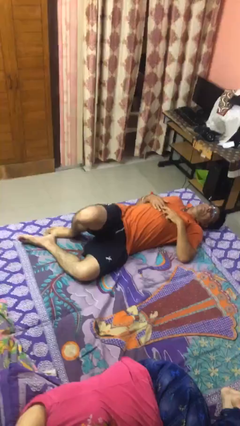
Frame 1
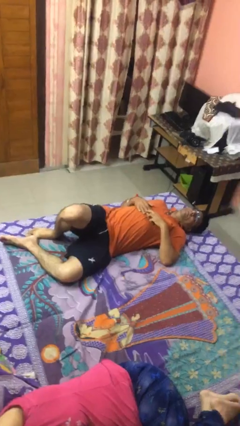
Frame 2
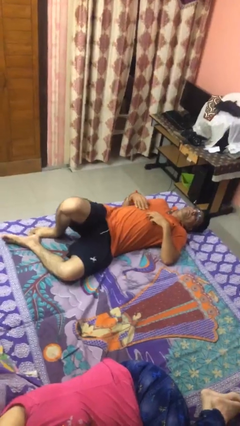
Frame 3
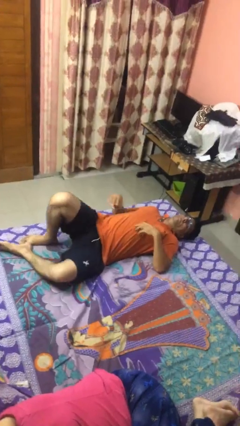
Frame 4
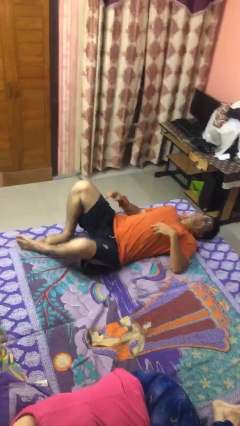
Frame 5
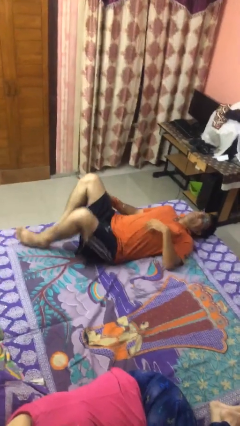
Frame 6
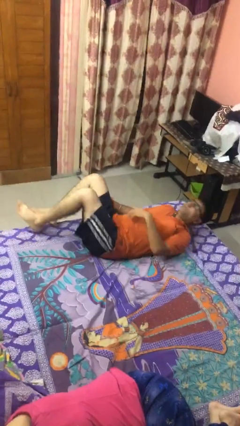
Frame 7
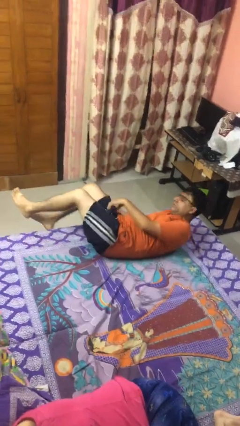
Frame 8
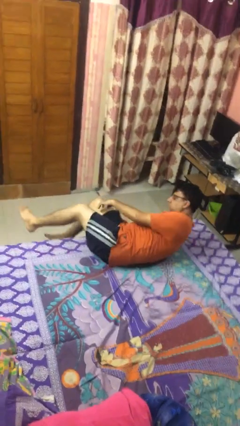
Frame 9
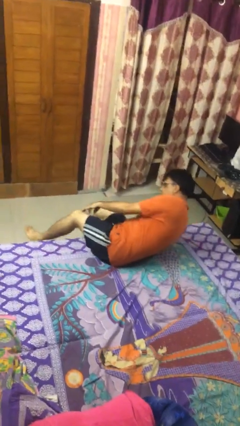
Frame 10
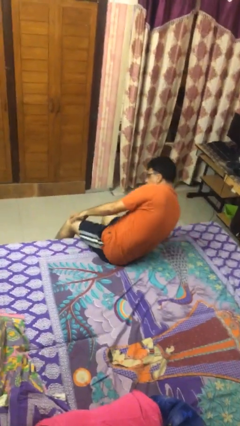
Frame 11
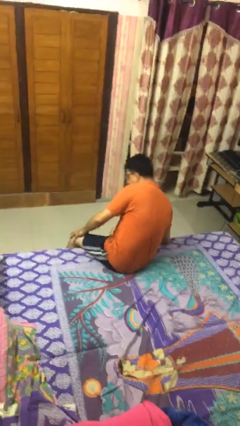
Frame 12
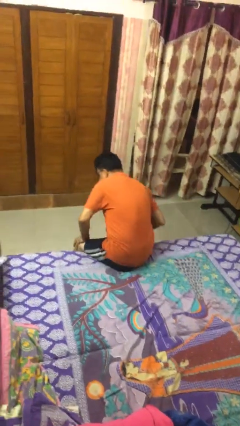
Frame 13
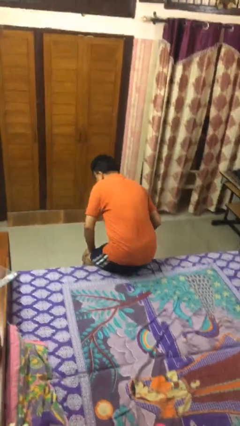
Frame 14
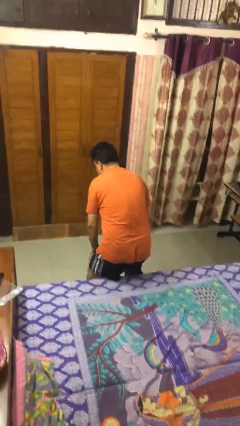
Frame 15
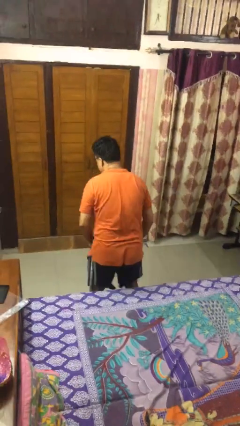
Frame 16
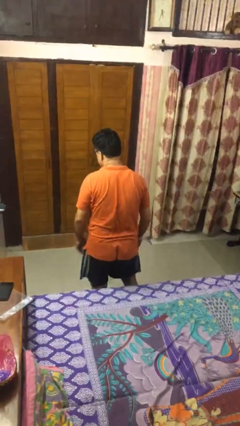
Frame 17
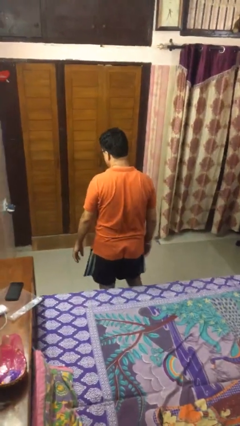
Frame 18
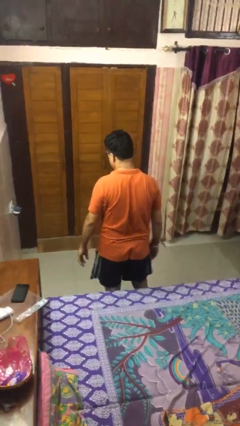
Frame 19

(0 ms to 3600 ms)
person stands up

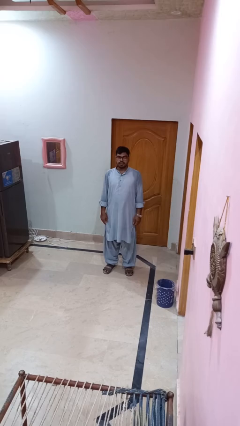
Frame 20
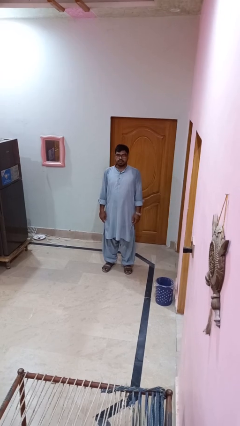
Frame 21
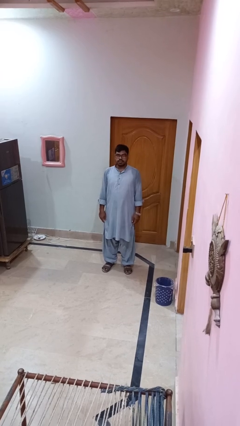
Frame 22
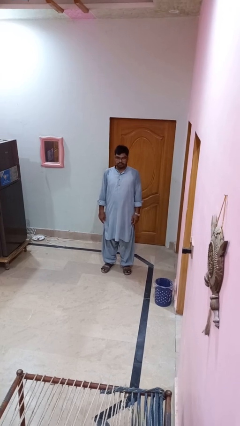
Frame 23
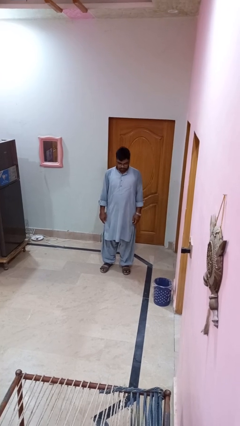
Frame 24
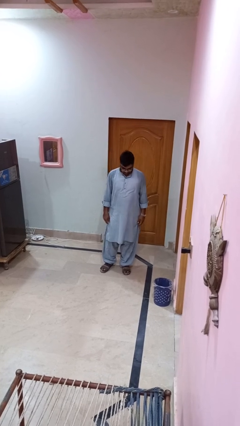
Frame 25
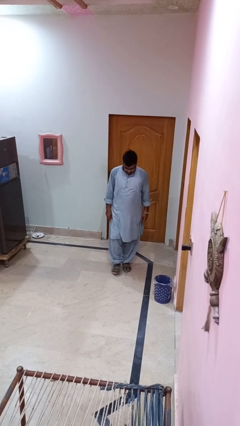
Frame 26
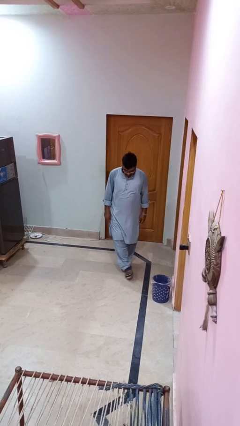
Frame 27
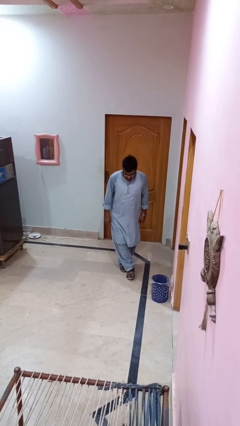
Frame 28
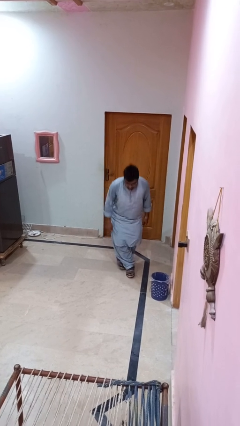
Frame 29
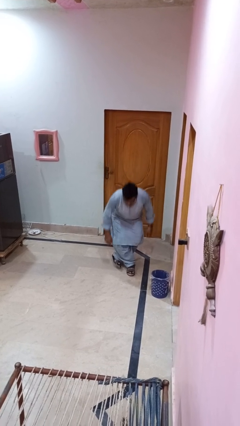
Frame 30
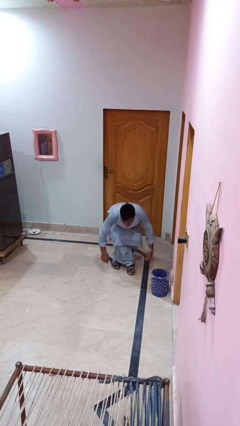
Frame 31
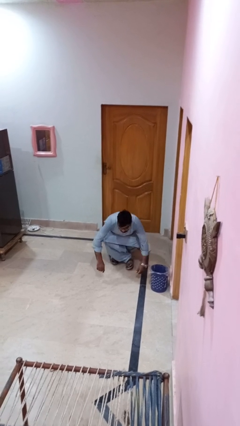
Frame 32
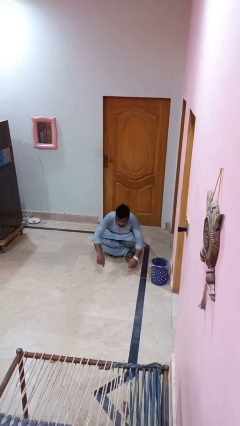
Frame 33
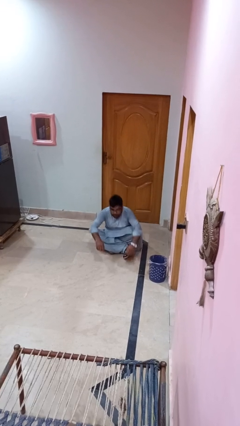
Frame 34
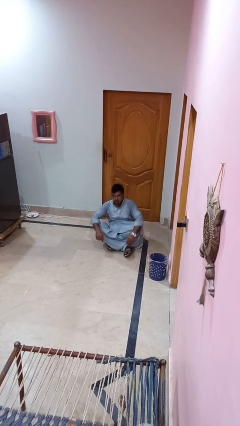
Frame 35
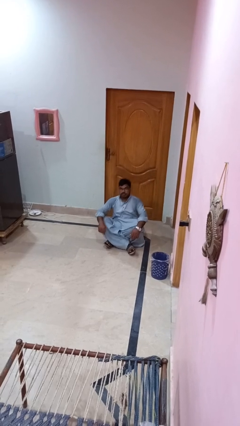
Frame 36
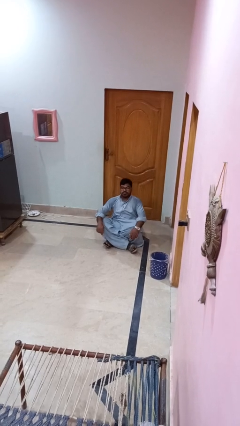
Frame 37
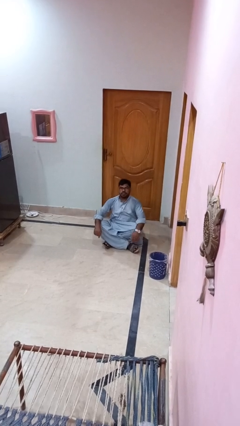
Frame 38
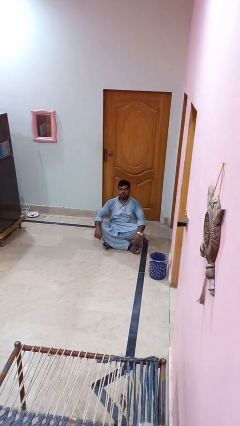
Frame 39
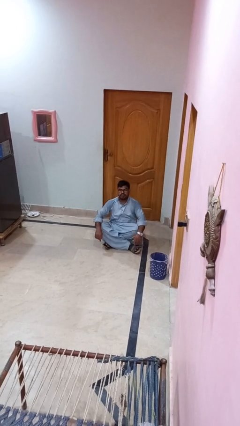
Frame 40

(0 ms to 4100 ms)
person sits crisscross

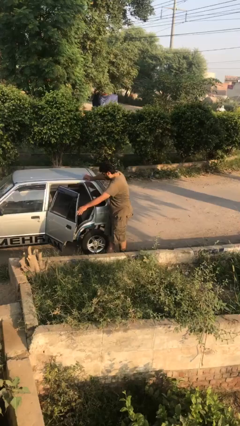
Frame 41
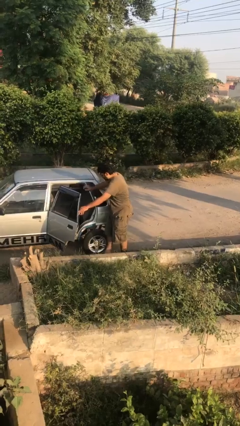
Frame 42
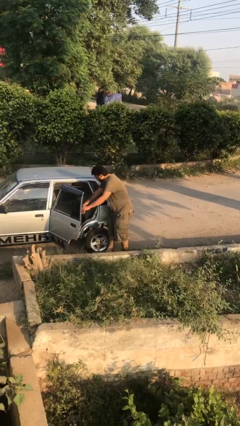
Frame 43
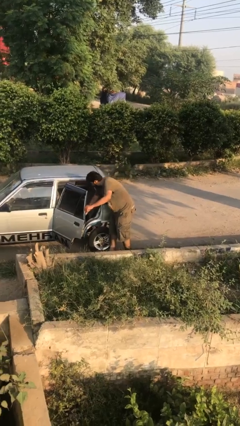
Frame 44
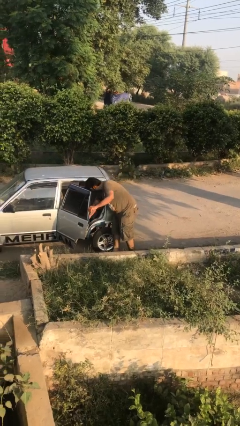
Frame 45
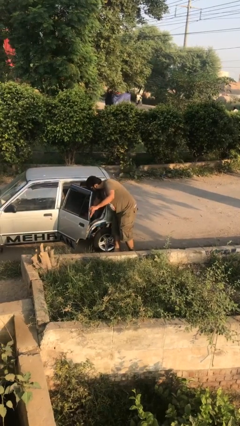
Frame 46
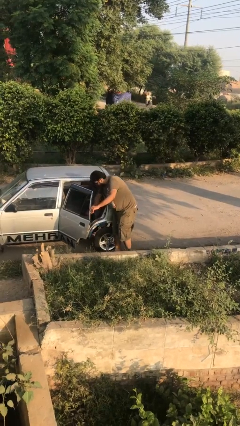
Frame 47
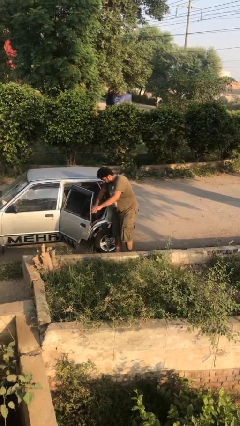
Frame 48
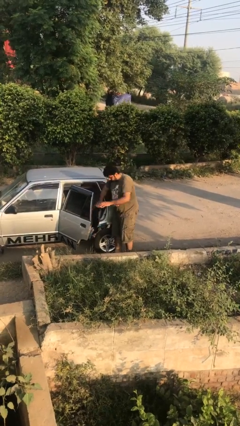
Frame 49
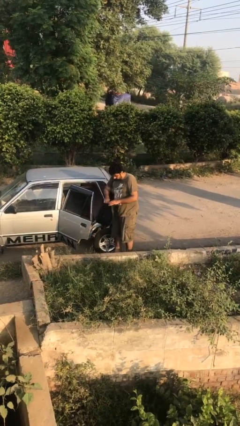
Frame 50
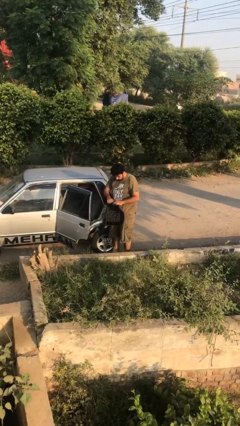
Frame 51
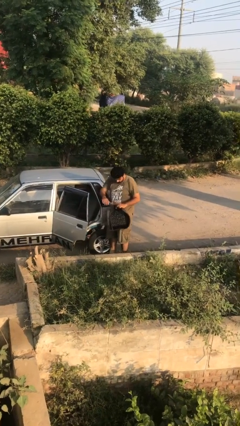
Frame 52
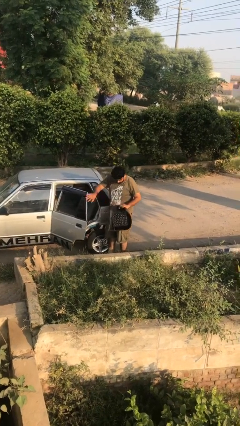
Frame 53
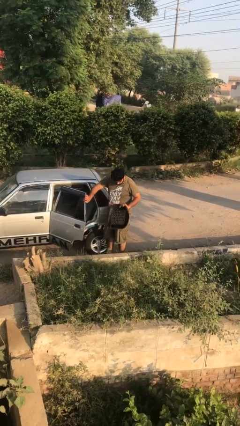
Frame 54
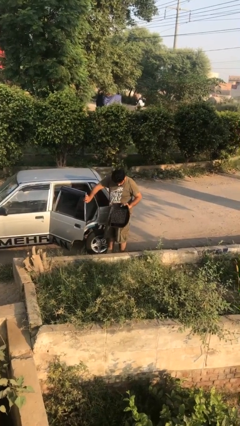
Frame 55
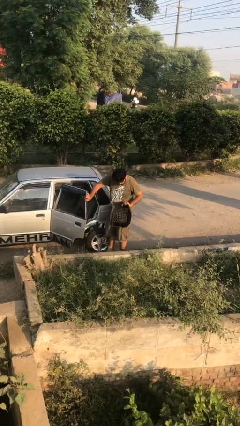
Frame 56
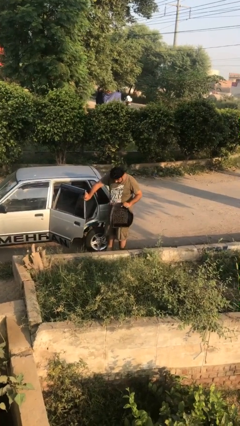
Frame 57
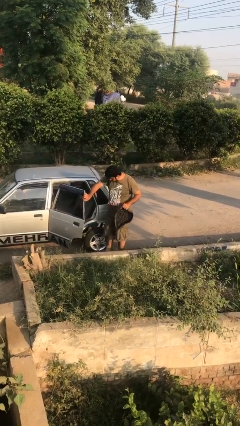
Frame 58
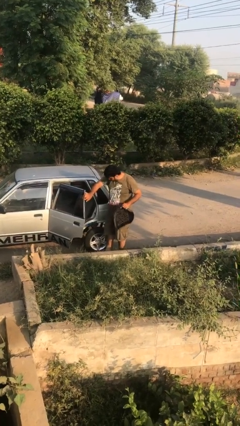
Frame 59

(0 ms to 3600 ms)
person unloads car

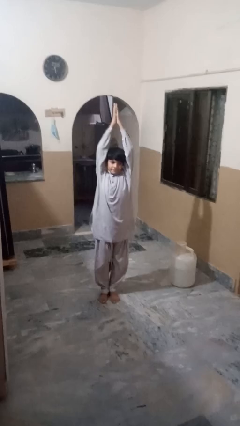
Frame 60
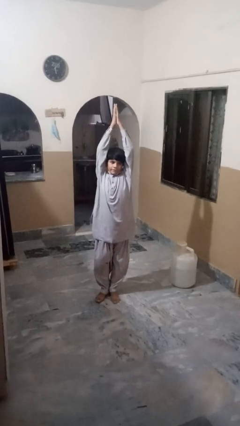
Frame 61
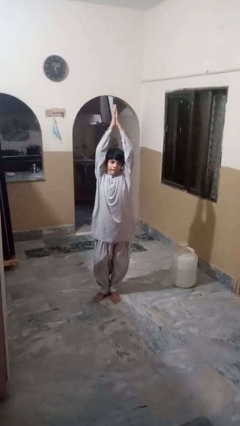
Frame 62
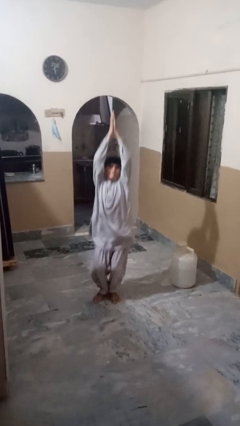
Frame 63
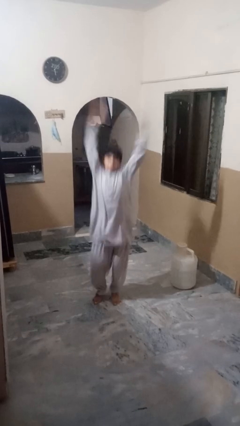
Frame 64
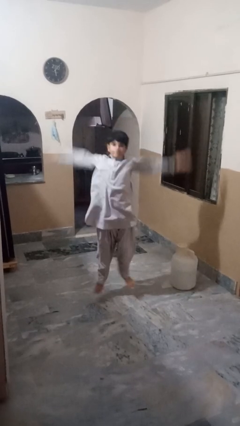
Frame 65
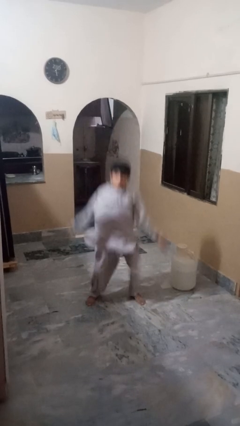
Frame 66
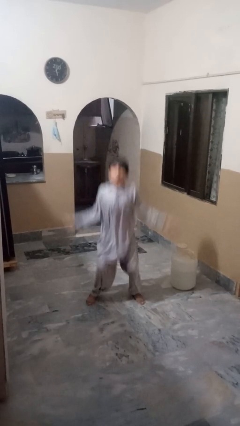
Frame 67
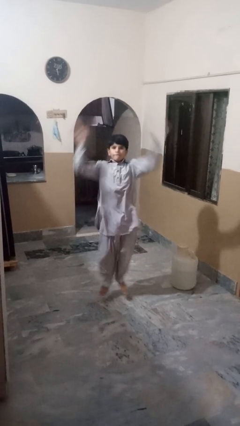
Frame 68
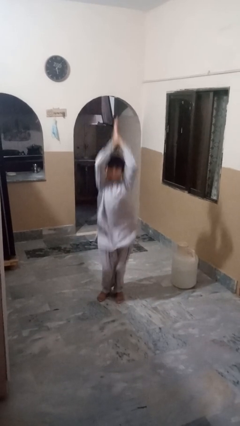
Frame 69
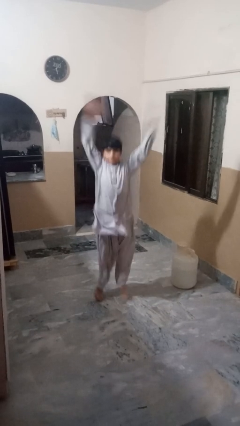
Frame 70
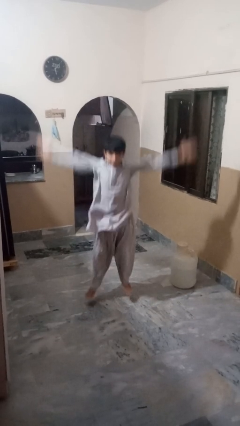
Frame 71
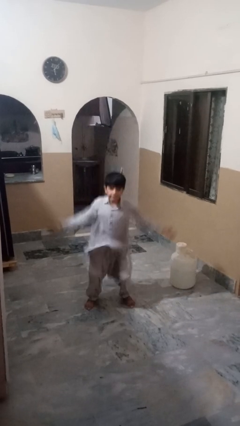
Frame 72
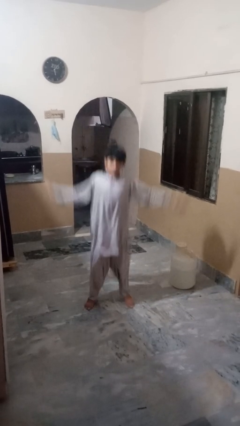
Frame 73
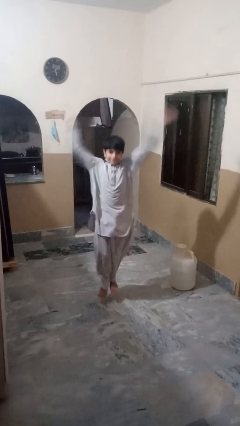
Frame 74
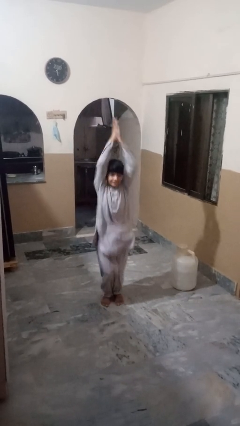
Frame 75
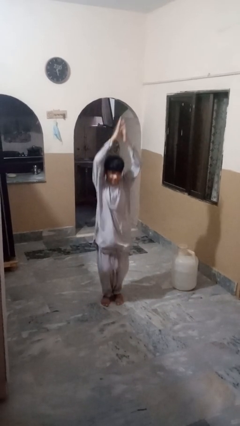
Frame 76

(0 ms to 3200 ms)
person exercises with jumping jacks

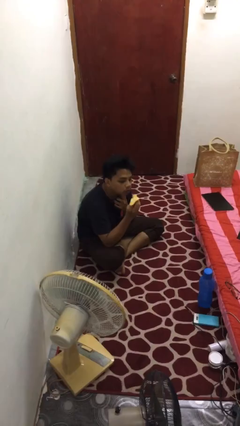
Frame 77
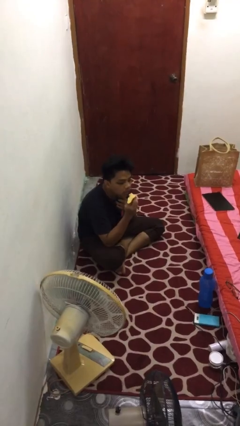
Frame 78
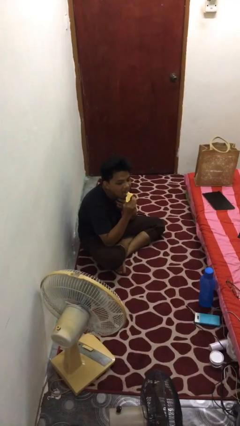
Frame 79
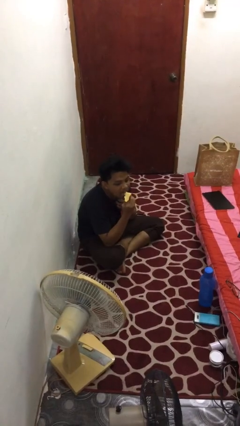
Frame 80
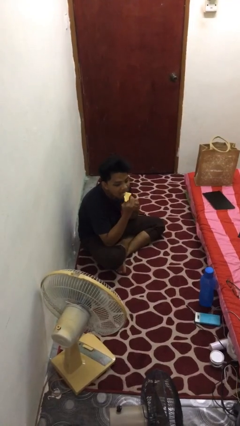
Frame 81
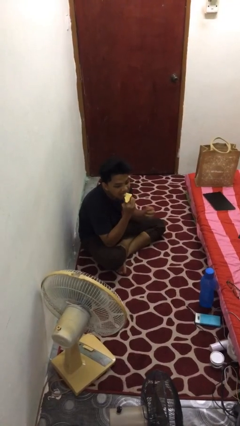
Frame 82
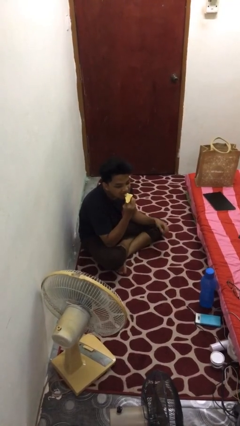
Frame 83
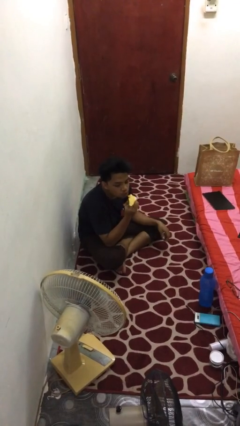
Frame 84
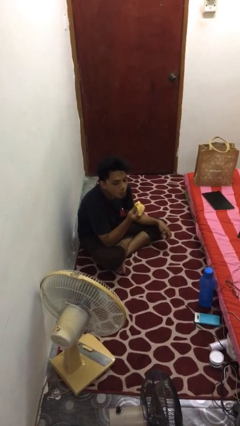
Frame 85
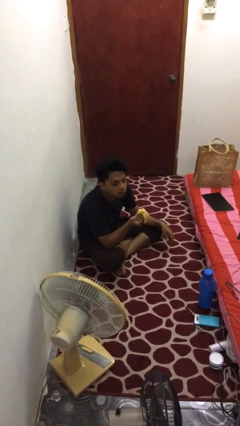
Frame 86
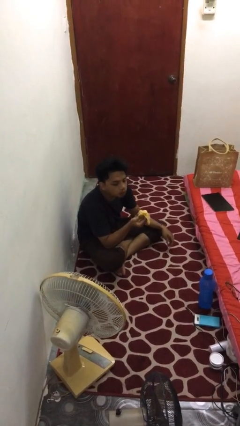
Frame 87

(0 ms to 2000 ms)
person eats banana

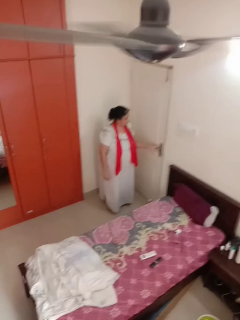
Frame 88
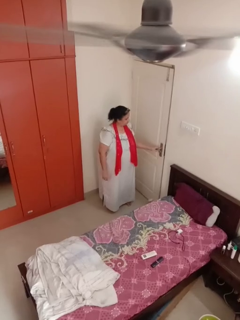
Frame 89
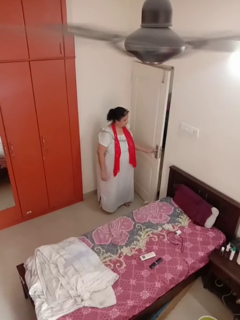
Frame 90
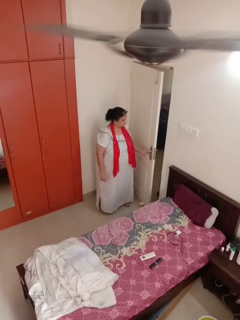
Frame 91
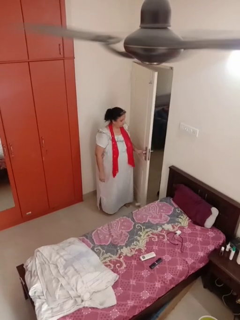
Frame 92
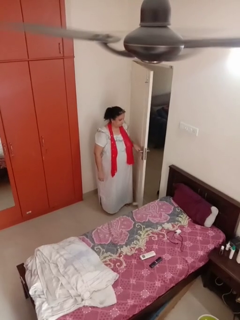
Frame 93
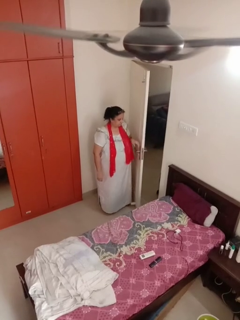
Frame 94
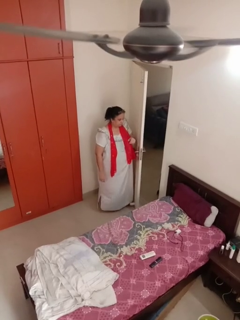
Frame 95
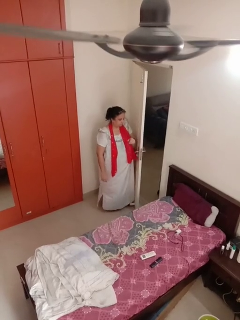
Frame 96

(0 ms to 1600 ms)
person opens facility door
